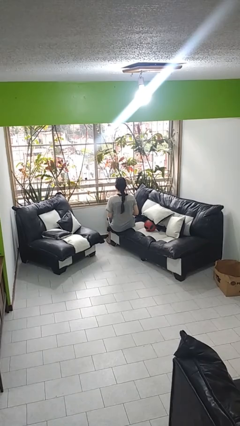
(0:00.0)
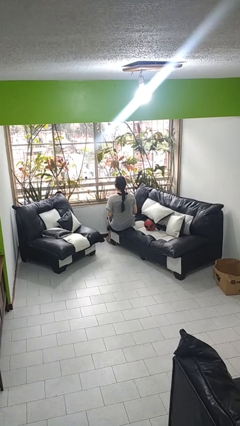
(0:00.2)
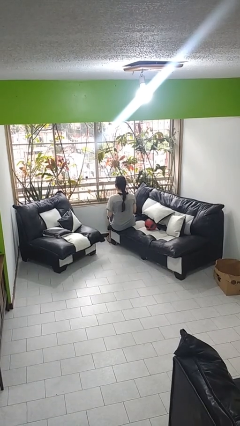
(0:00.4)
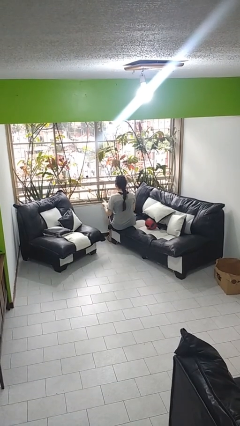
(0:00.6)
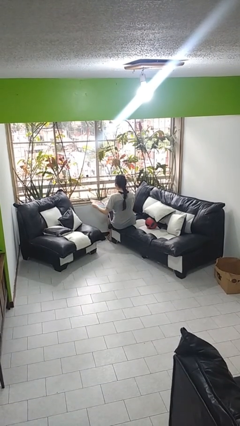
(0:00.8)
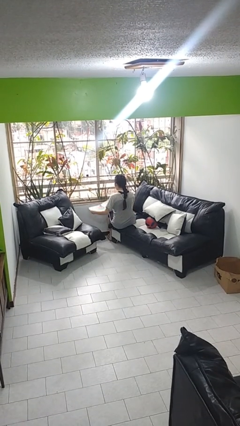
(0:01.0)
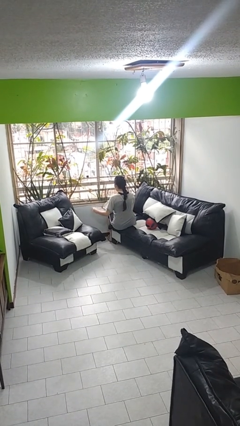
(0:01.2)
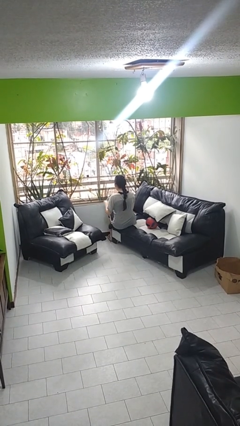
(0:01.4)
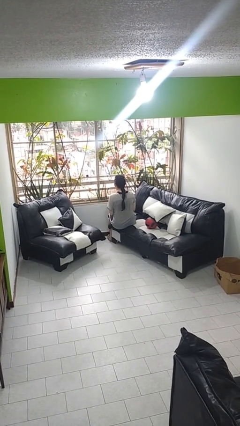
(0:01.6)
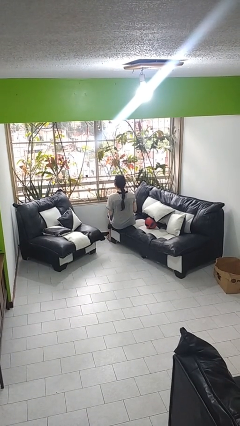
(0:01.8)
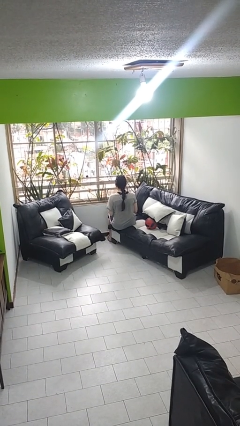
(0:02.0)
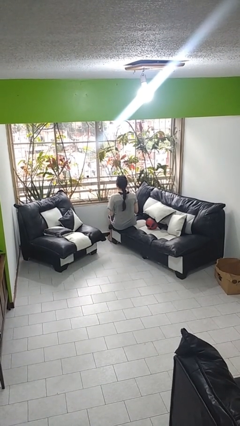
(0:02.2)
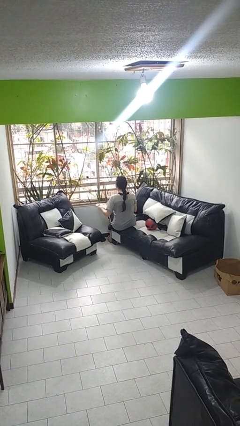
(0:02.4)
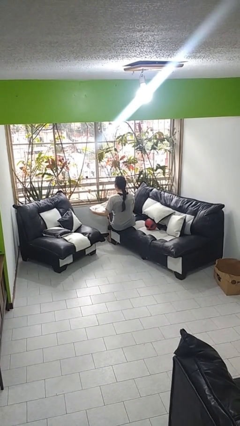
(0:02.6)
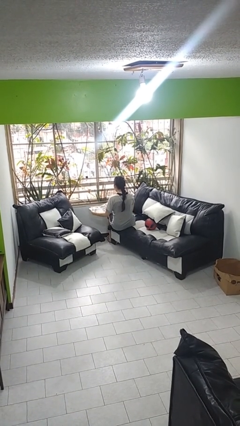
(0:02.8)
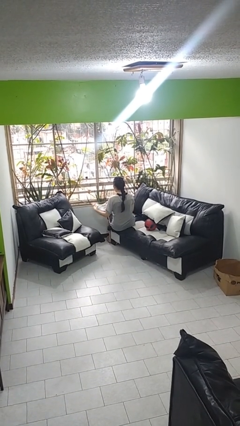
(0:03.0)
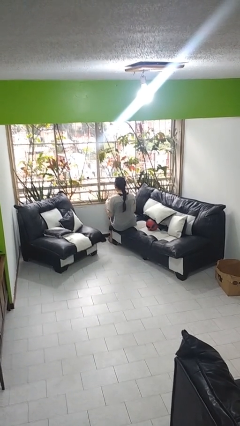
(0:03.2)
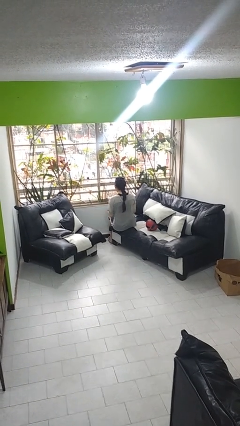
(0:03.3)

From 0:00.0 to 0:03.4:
person reads magazine

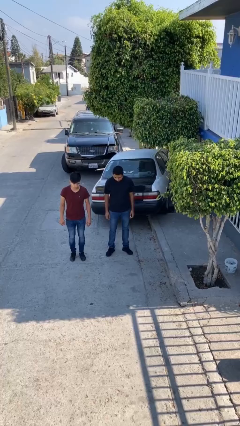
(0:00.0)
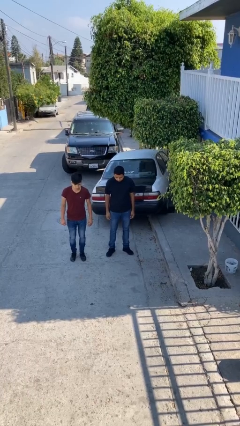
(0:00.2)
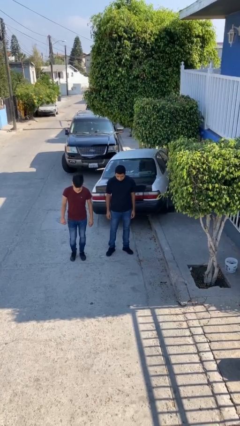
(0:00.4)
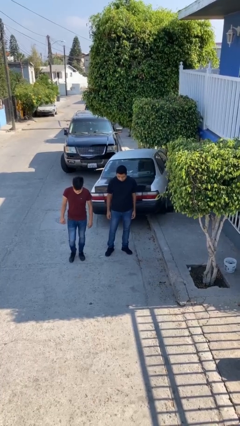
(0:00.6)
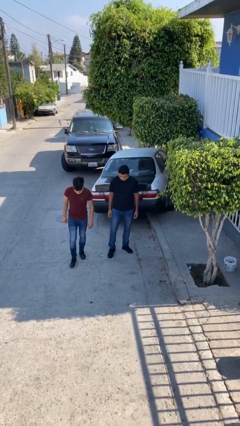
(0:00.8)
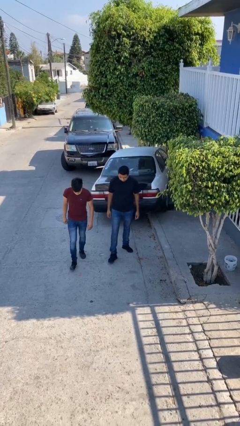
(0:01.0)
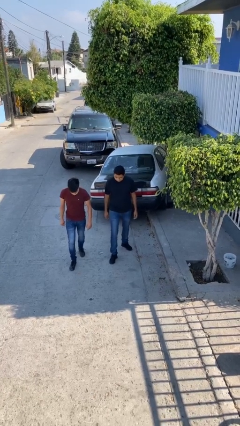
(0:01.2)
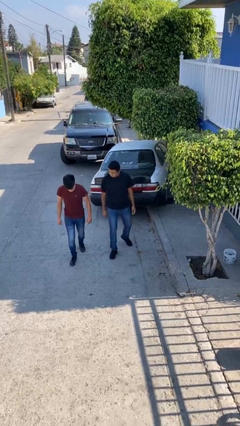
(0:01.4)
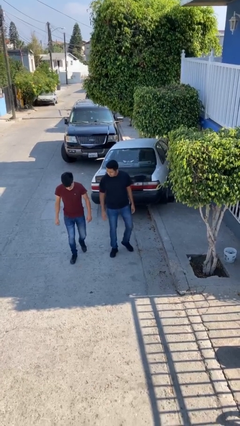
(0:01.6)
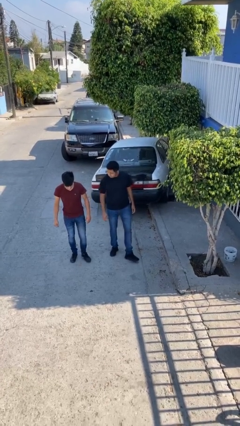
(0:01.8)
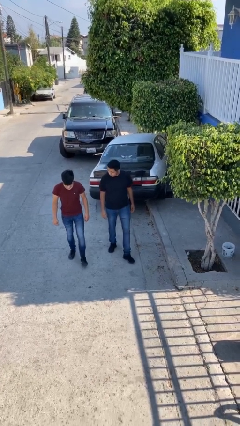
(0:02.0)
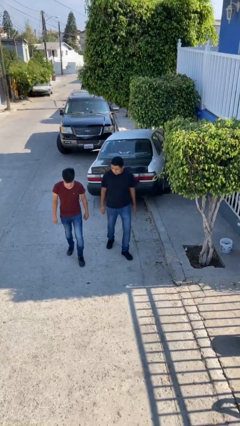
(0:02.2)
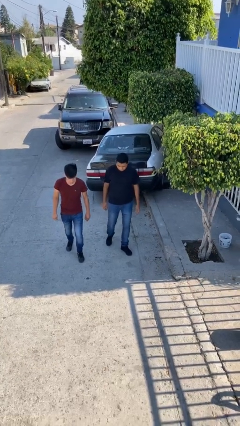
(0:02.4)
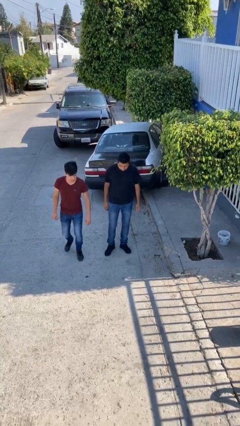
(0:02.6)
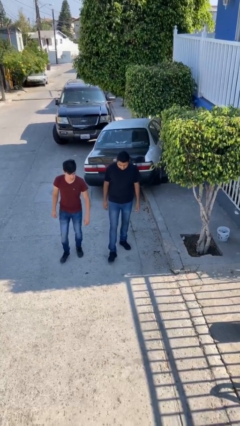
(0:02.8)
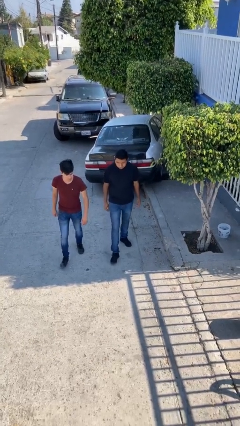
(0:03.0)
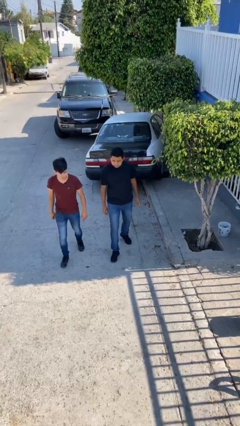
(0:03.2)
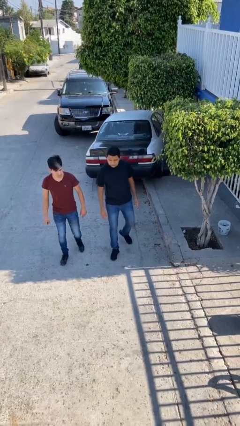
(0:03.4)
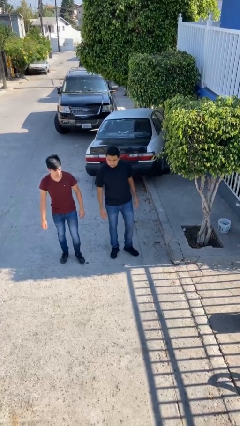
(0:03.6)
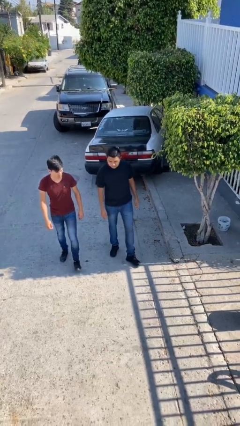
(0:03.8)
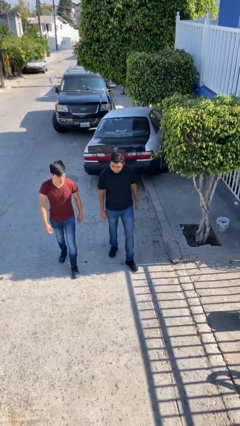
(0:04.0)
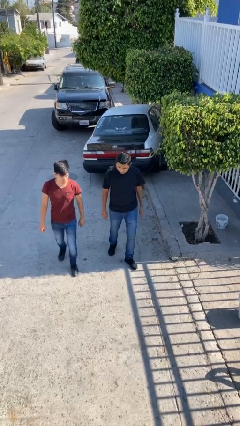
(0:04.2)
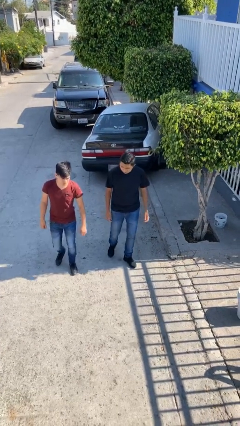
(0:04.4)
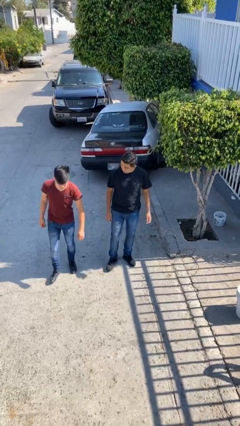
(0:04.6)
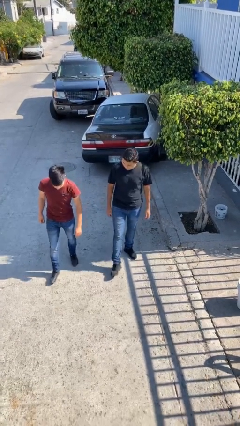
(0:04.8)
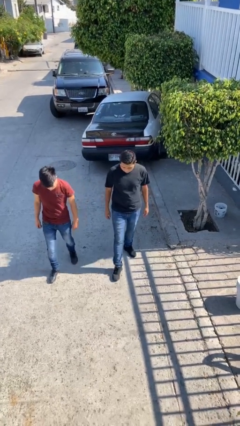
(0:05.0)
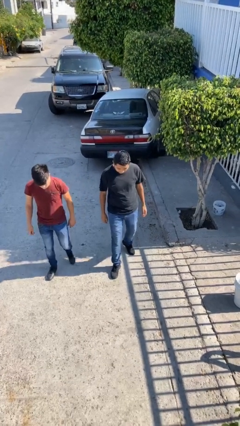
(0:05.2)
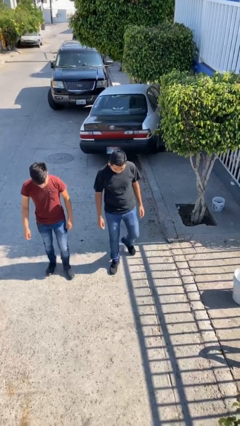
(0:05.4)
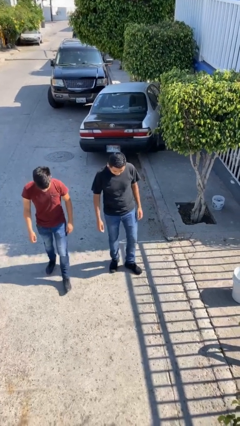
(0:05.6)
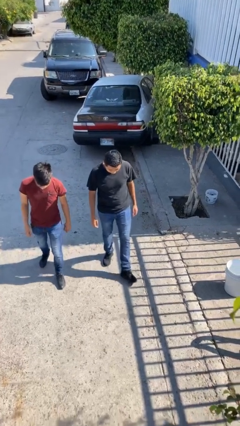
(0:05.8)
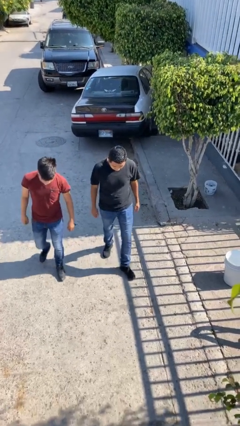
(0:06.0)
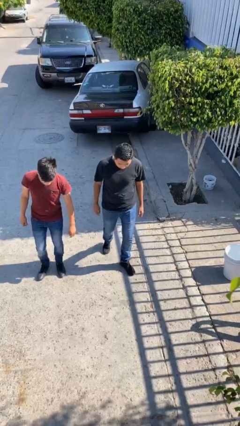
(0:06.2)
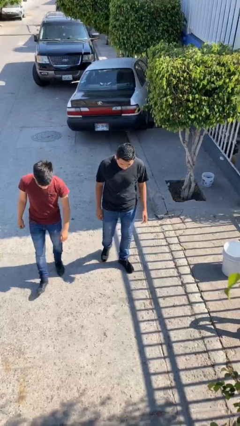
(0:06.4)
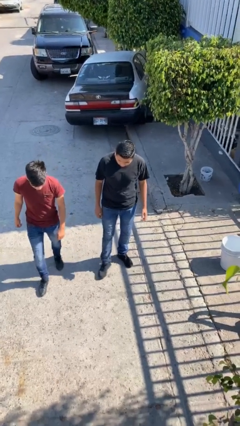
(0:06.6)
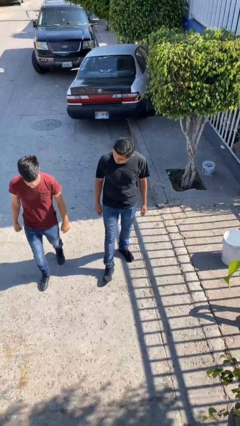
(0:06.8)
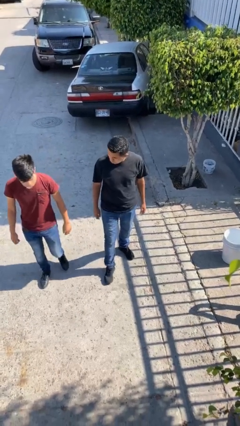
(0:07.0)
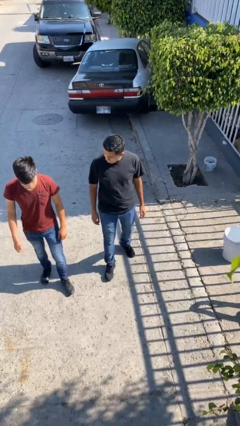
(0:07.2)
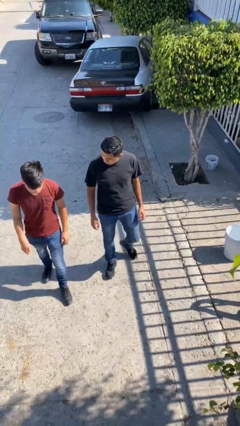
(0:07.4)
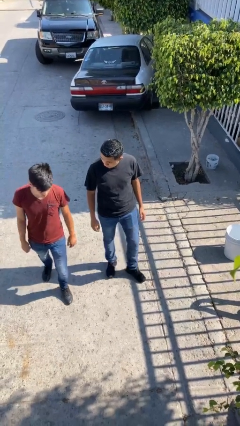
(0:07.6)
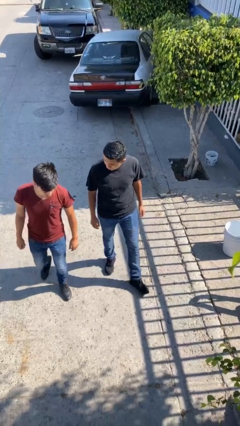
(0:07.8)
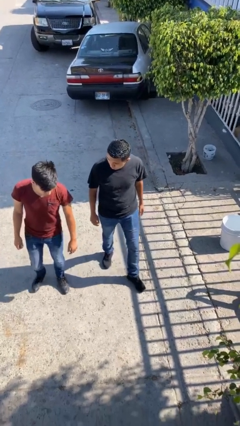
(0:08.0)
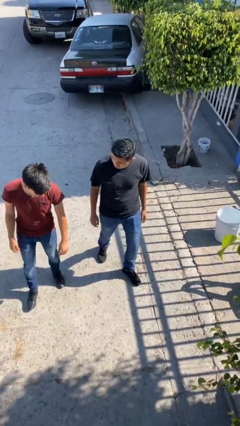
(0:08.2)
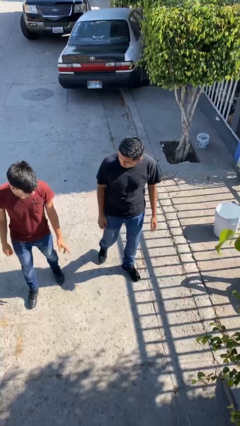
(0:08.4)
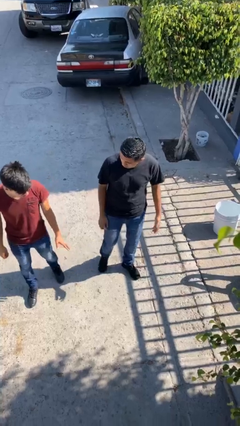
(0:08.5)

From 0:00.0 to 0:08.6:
person talks to person

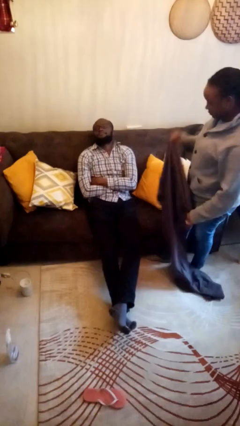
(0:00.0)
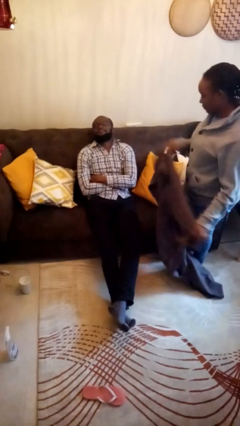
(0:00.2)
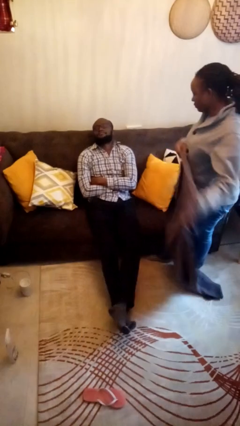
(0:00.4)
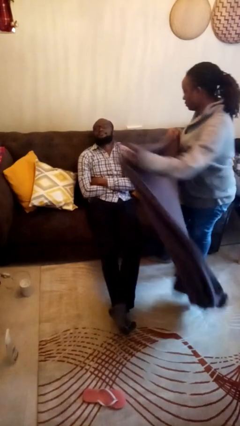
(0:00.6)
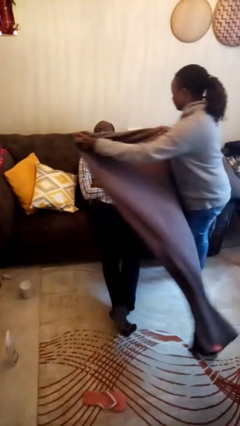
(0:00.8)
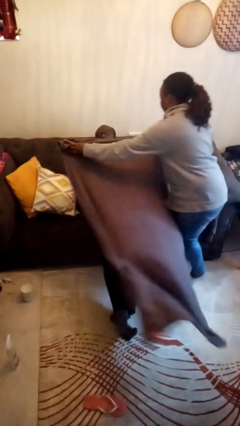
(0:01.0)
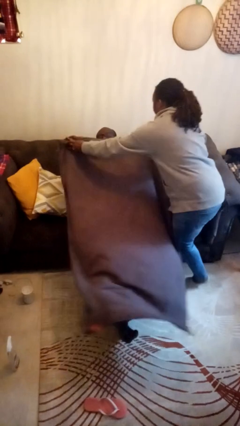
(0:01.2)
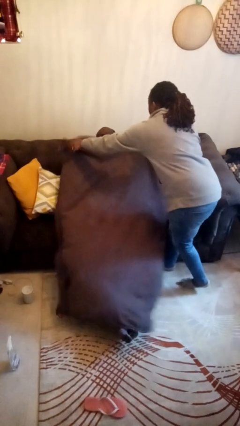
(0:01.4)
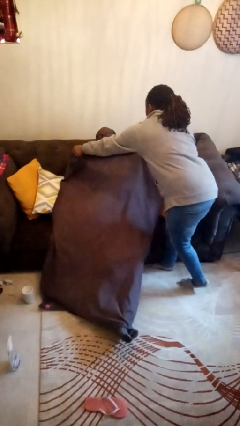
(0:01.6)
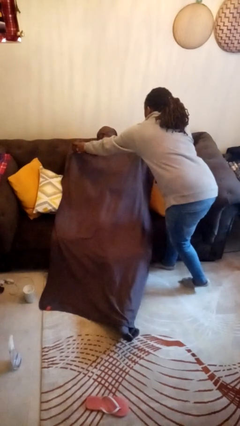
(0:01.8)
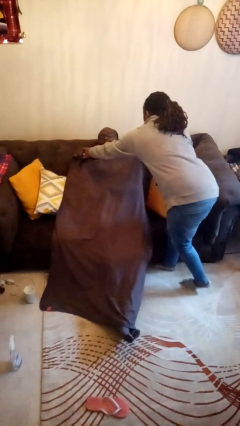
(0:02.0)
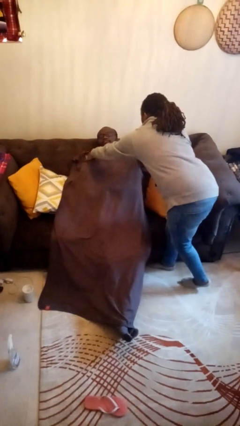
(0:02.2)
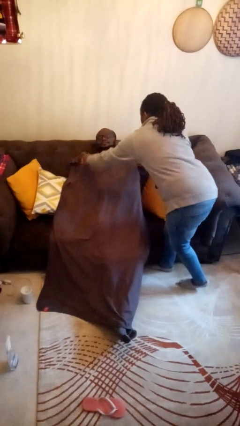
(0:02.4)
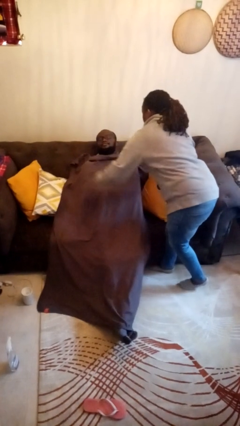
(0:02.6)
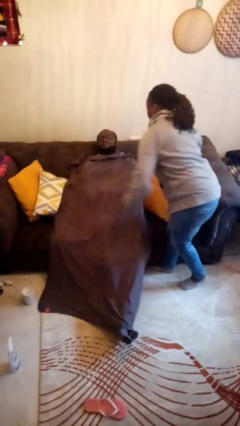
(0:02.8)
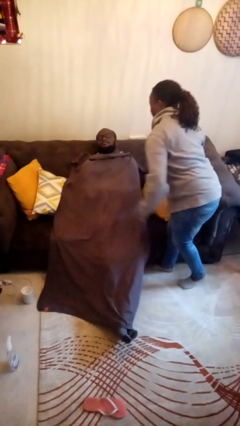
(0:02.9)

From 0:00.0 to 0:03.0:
person covers friend with blanket

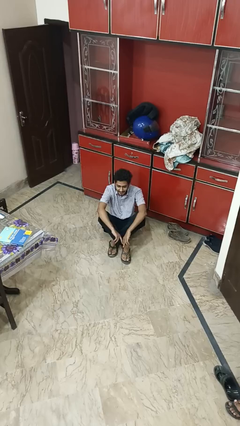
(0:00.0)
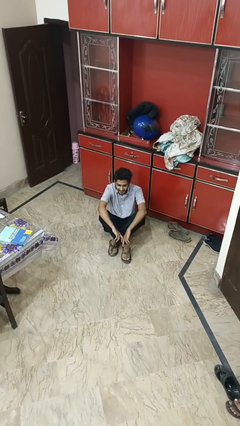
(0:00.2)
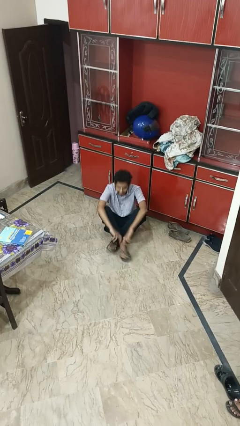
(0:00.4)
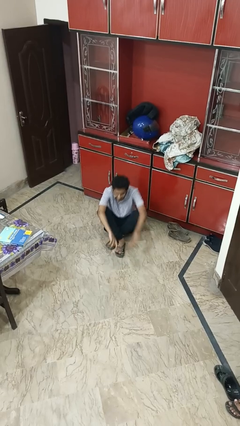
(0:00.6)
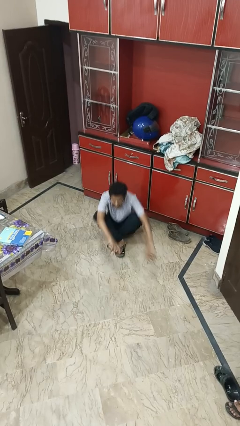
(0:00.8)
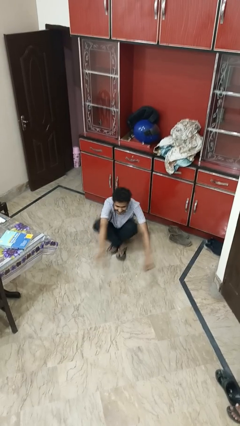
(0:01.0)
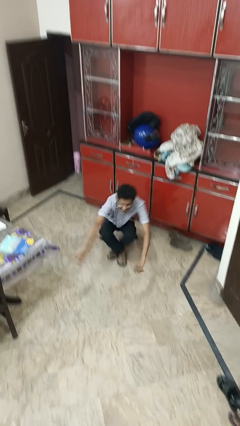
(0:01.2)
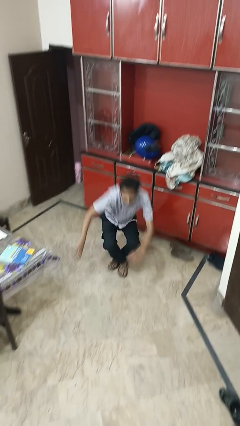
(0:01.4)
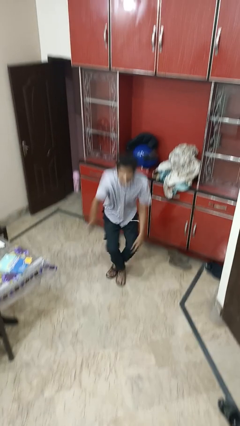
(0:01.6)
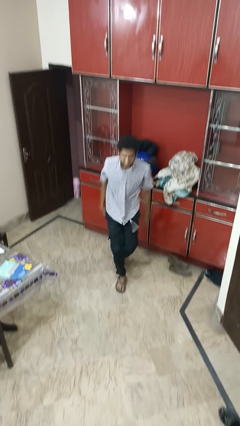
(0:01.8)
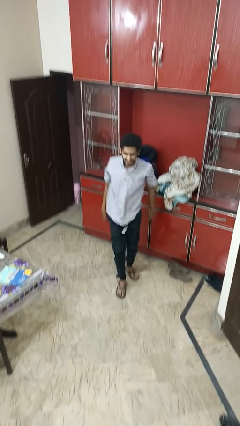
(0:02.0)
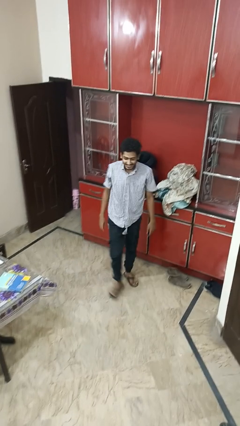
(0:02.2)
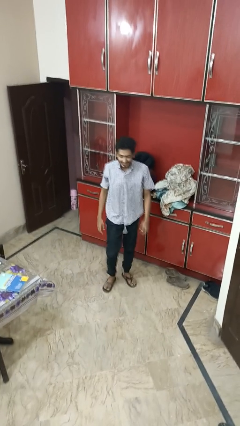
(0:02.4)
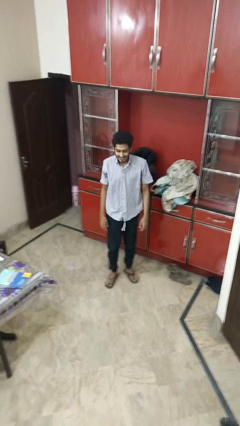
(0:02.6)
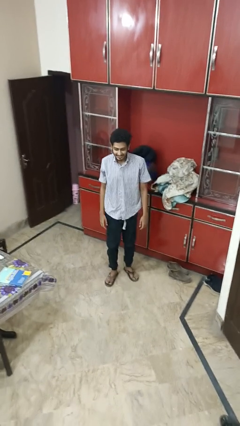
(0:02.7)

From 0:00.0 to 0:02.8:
person stands up from floor
